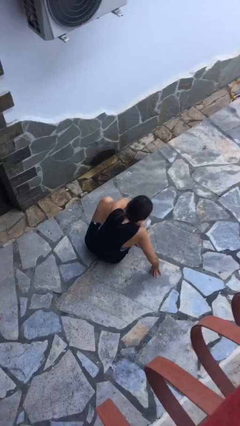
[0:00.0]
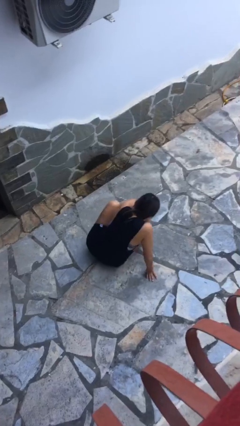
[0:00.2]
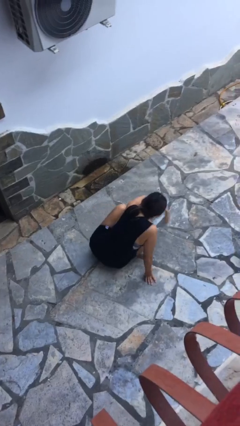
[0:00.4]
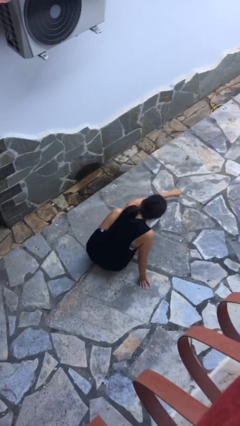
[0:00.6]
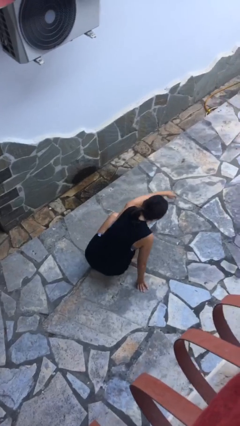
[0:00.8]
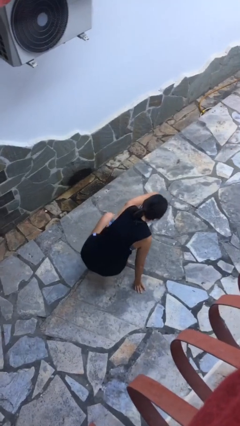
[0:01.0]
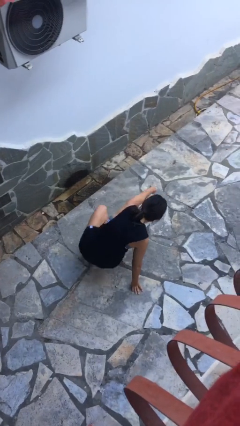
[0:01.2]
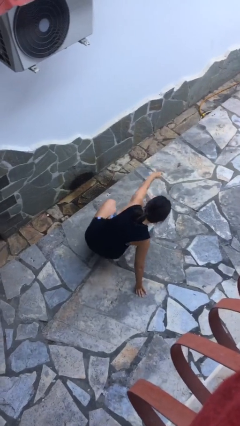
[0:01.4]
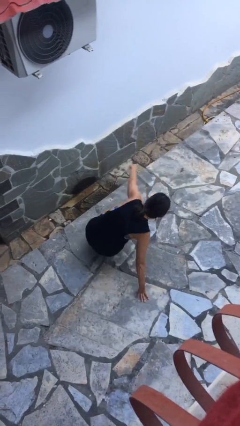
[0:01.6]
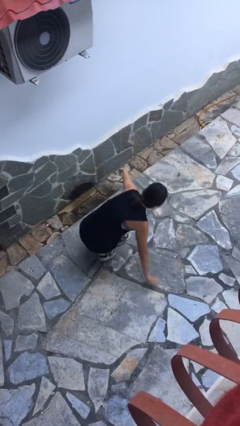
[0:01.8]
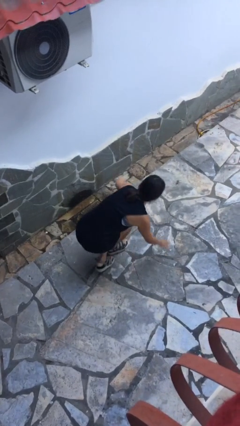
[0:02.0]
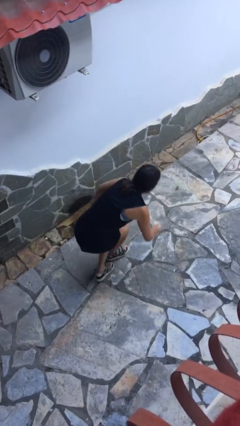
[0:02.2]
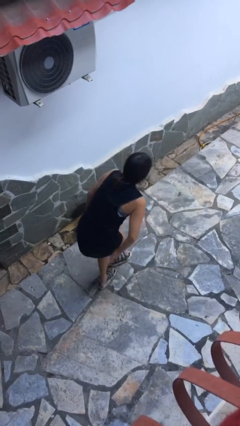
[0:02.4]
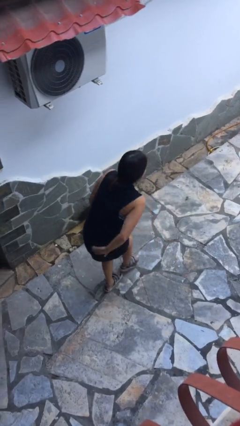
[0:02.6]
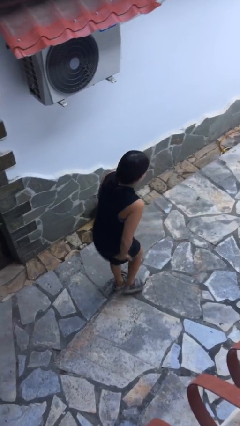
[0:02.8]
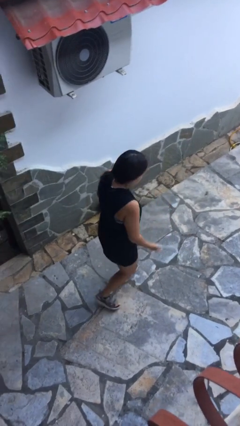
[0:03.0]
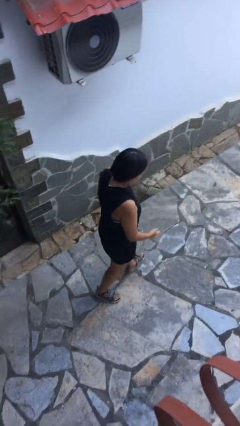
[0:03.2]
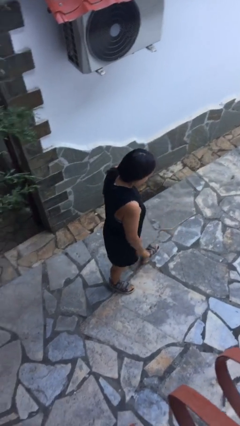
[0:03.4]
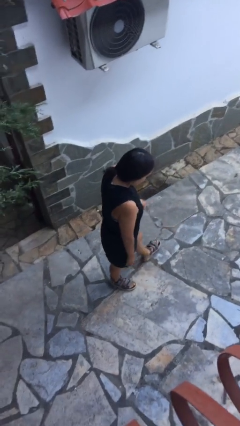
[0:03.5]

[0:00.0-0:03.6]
person stands up from floor

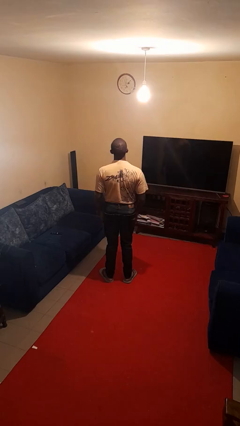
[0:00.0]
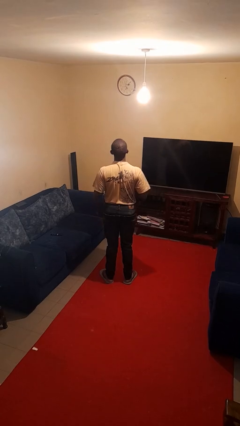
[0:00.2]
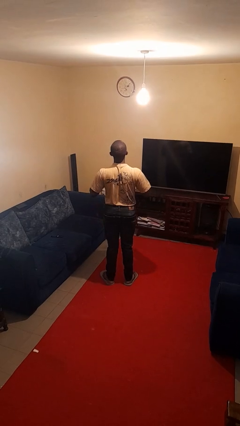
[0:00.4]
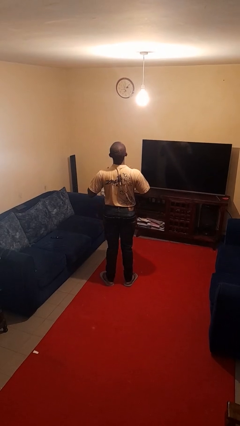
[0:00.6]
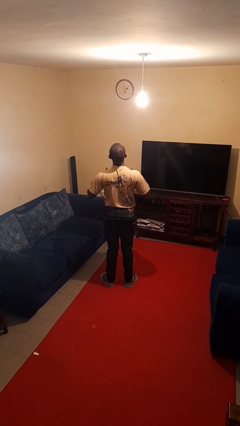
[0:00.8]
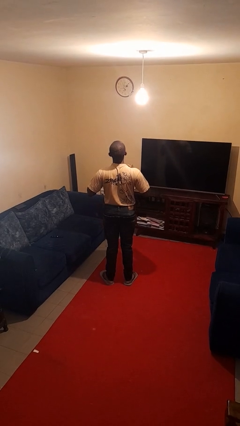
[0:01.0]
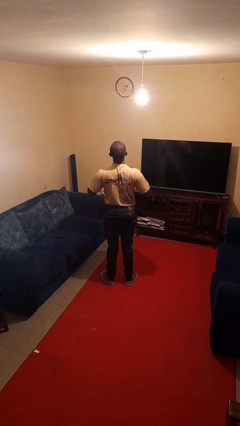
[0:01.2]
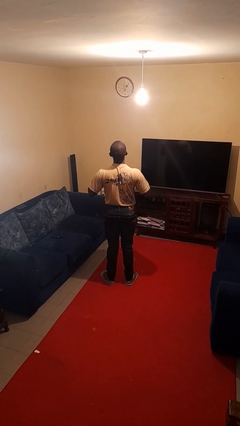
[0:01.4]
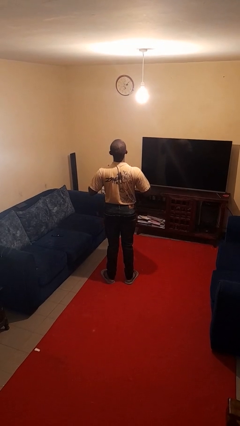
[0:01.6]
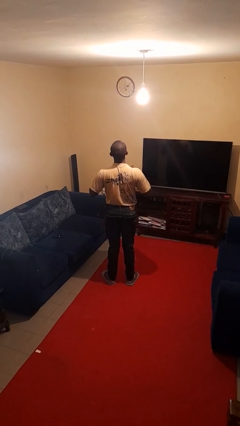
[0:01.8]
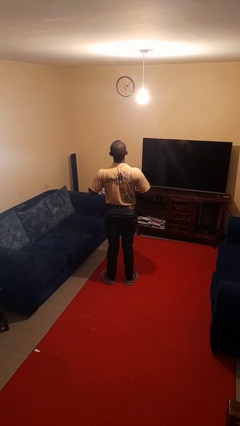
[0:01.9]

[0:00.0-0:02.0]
person drums on chest

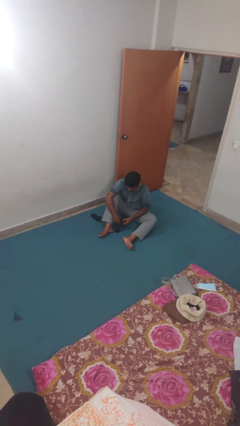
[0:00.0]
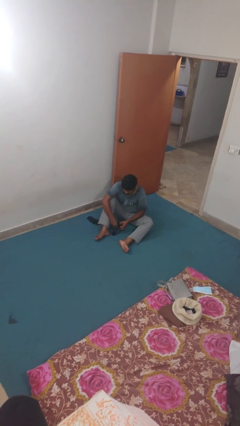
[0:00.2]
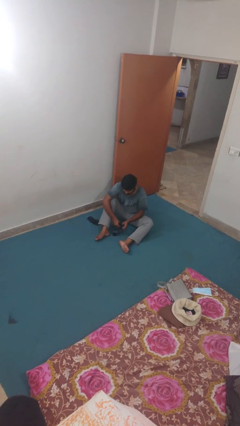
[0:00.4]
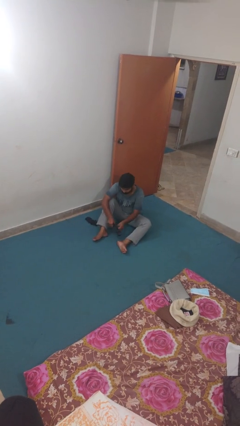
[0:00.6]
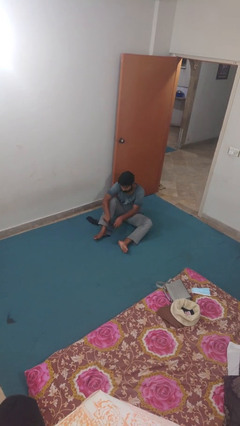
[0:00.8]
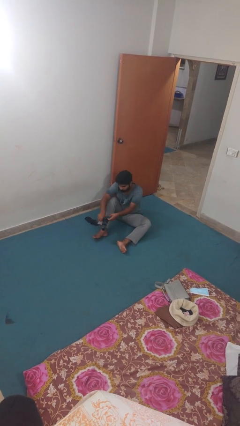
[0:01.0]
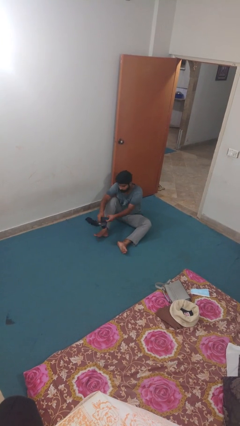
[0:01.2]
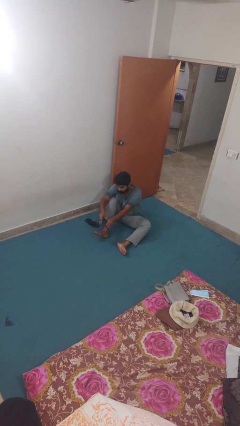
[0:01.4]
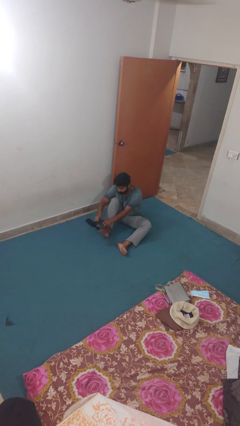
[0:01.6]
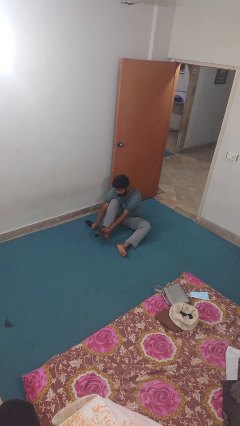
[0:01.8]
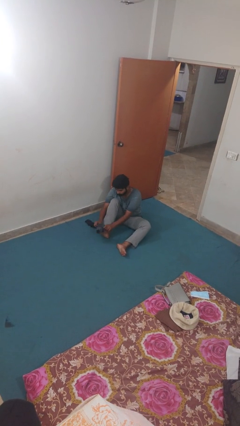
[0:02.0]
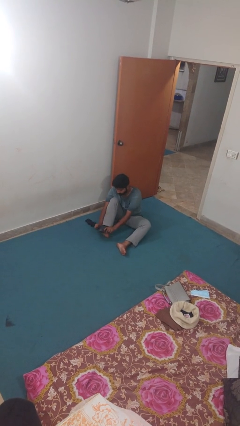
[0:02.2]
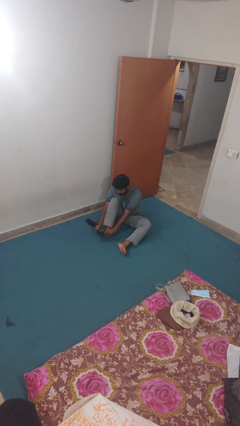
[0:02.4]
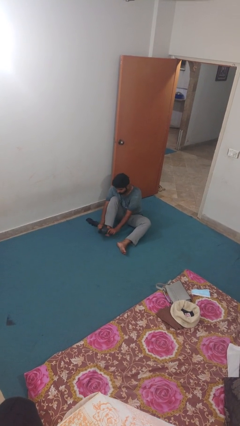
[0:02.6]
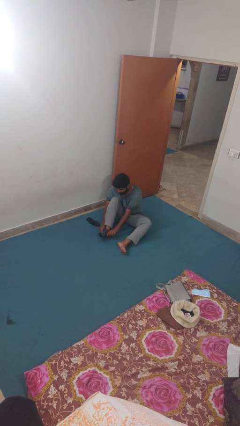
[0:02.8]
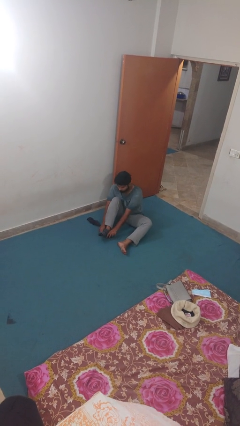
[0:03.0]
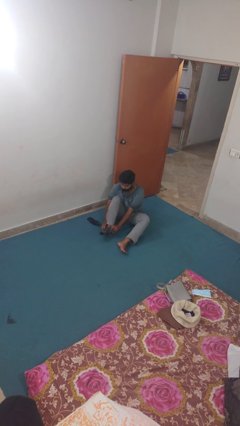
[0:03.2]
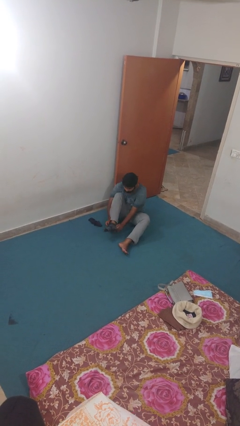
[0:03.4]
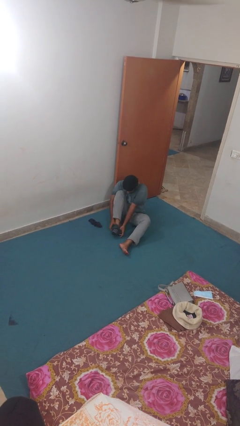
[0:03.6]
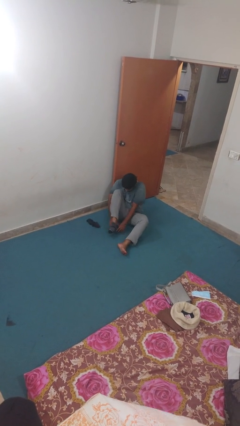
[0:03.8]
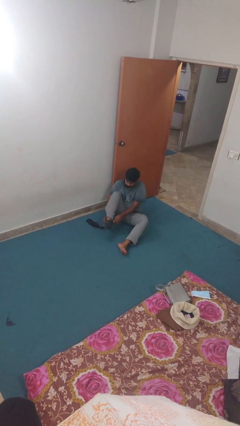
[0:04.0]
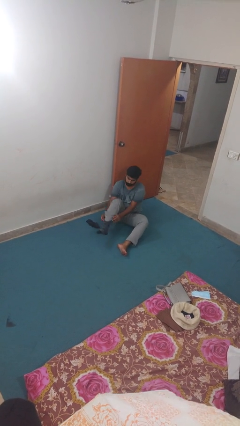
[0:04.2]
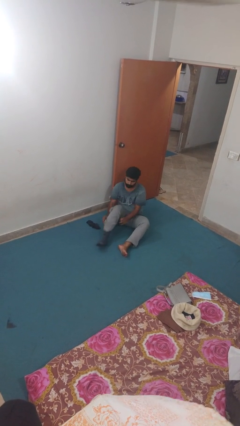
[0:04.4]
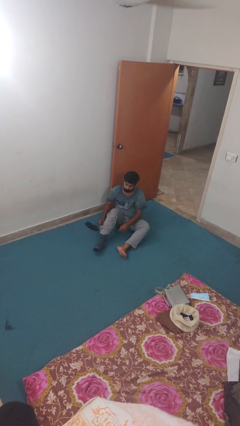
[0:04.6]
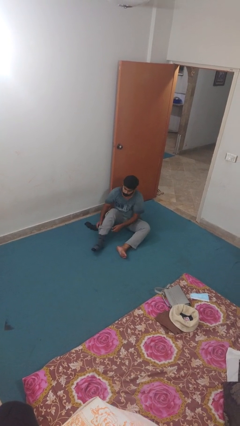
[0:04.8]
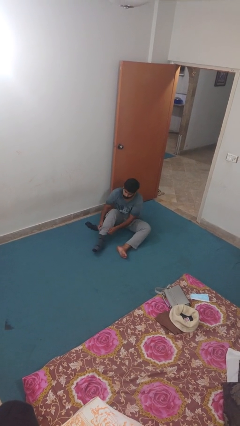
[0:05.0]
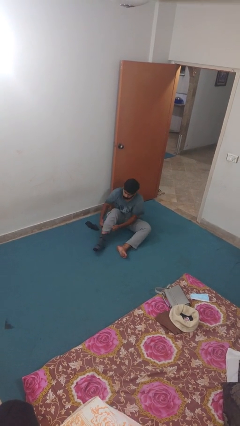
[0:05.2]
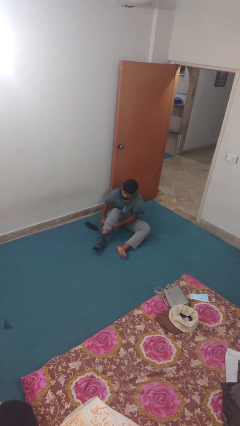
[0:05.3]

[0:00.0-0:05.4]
person puts on socks

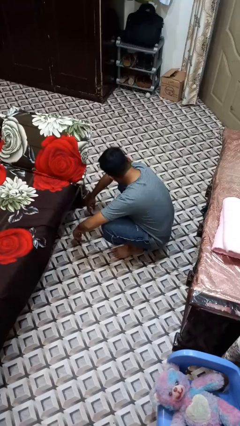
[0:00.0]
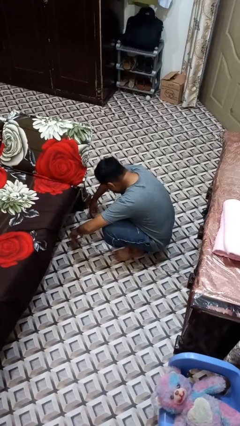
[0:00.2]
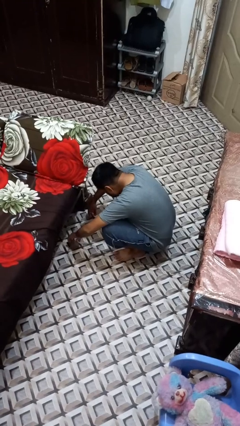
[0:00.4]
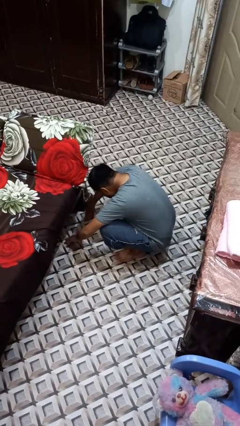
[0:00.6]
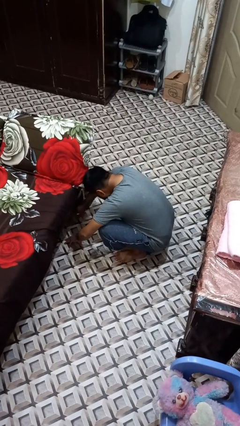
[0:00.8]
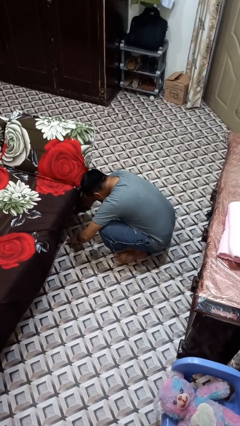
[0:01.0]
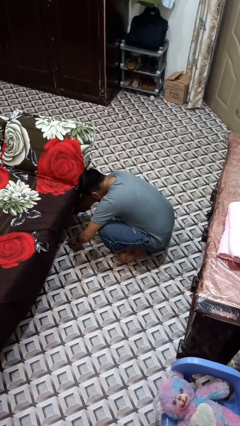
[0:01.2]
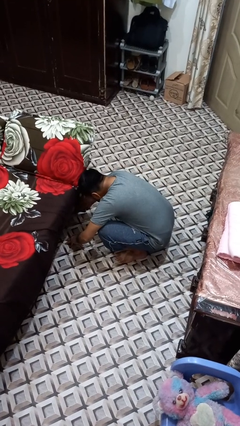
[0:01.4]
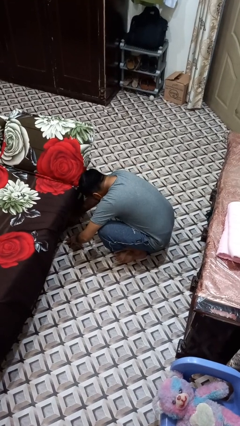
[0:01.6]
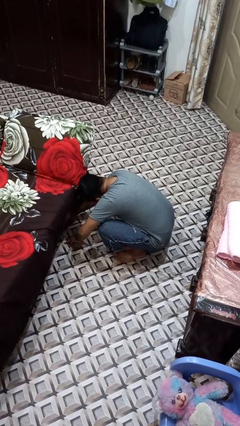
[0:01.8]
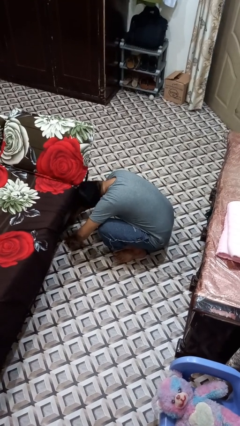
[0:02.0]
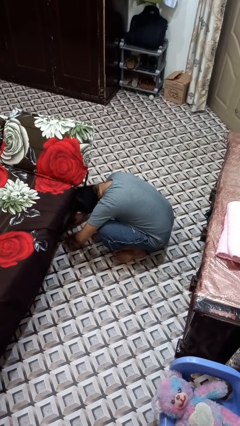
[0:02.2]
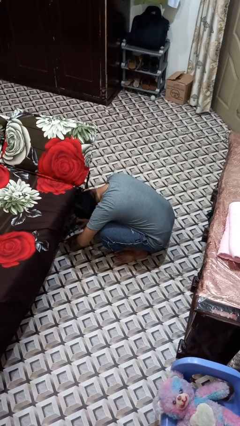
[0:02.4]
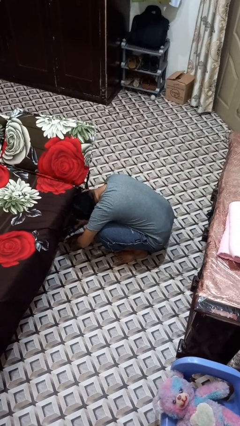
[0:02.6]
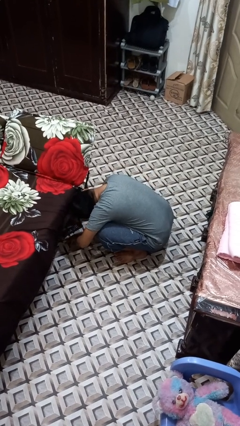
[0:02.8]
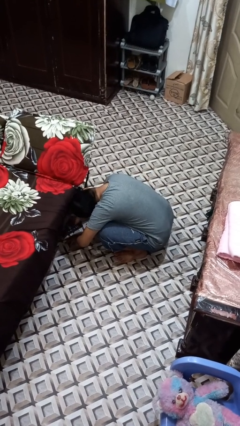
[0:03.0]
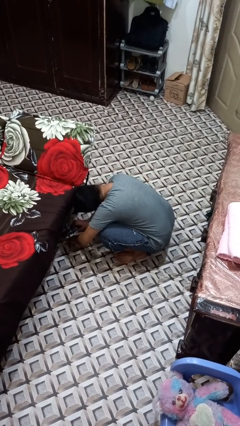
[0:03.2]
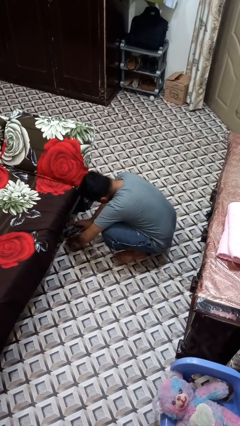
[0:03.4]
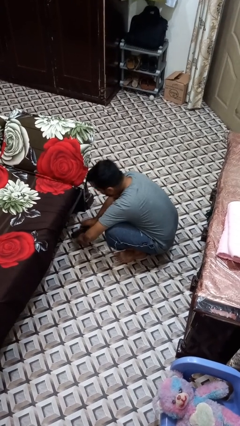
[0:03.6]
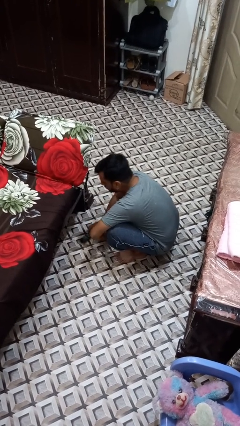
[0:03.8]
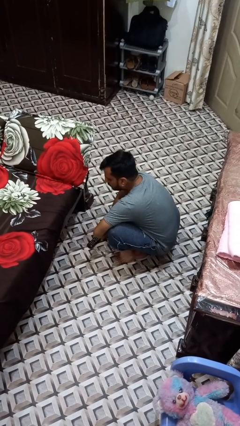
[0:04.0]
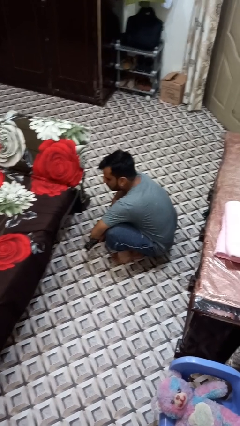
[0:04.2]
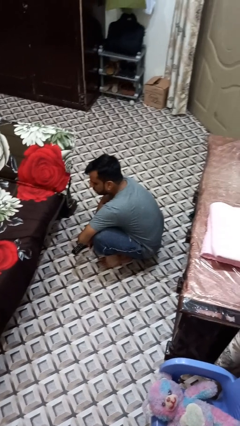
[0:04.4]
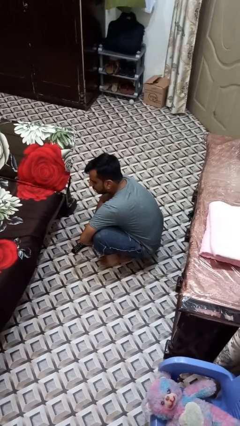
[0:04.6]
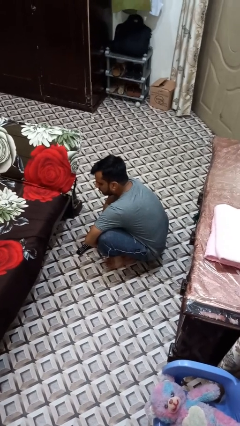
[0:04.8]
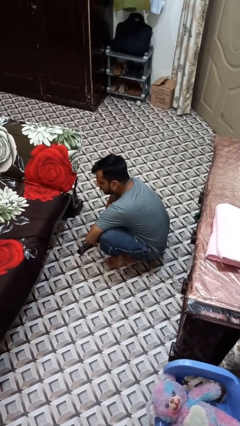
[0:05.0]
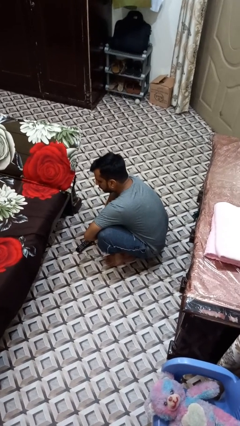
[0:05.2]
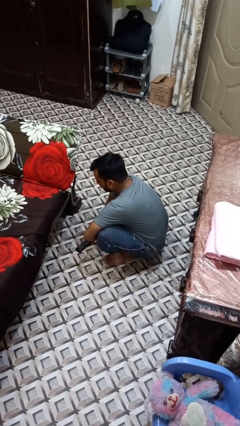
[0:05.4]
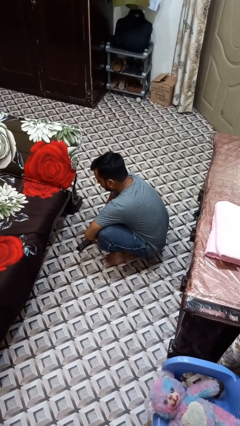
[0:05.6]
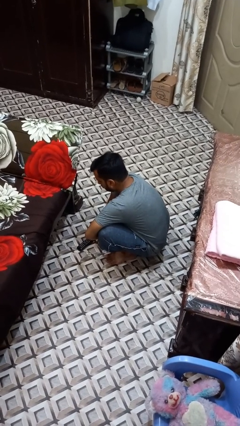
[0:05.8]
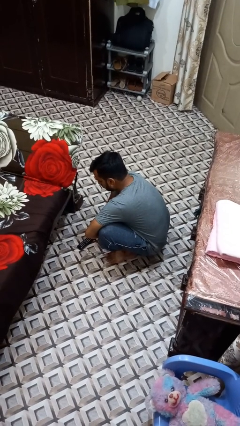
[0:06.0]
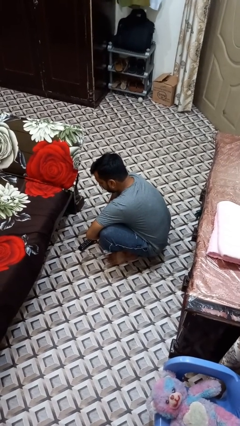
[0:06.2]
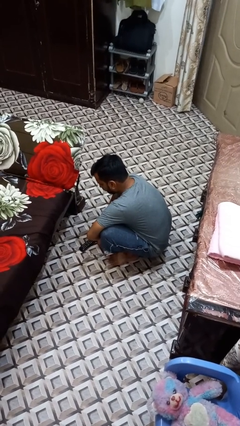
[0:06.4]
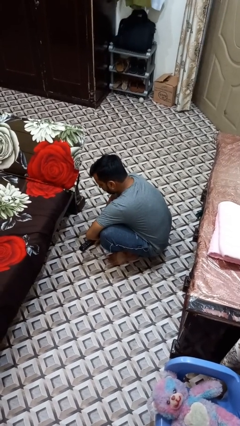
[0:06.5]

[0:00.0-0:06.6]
person searches under couch
